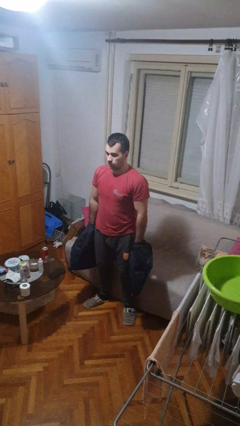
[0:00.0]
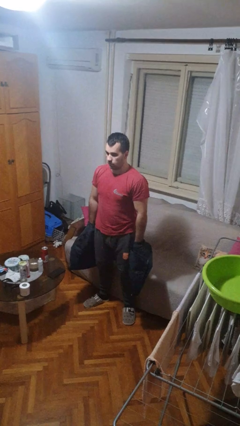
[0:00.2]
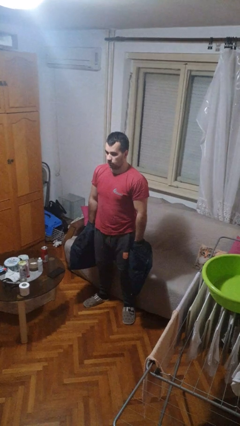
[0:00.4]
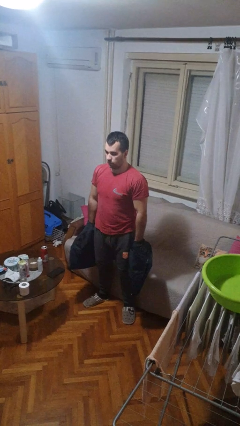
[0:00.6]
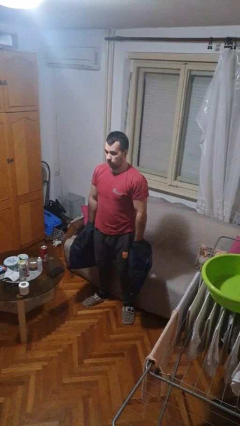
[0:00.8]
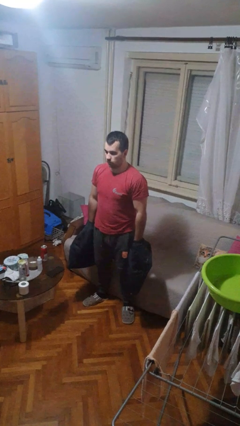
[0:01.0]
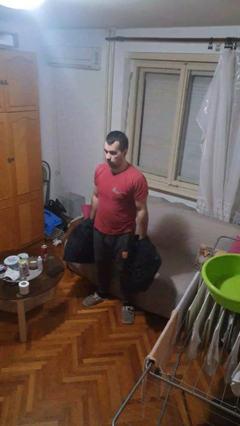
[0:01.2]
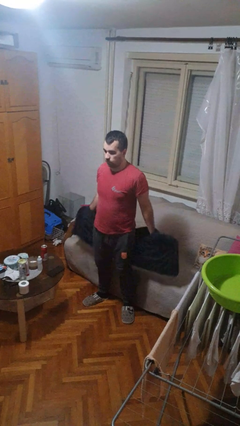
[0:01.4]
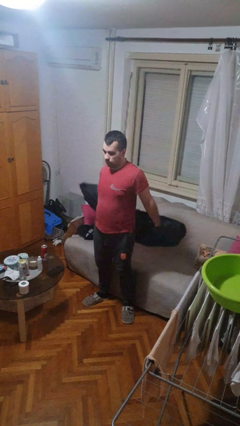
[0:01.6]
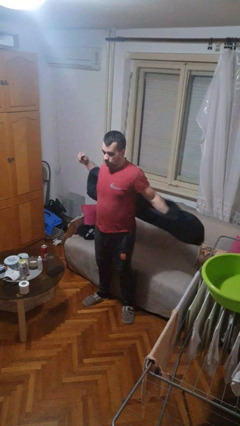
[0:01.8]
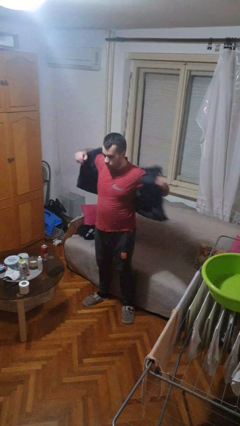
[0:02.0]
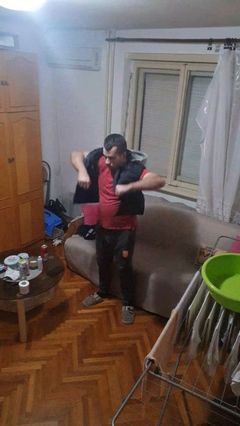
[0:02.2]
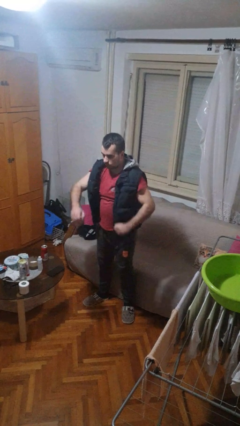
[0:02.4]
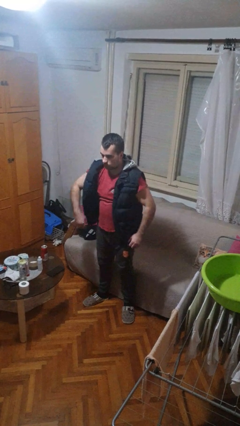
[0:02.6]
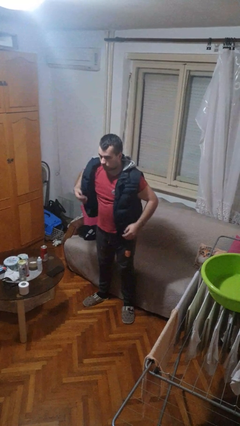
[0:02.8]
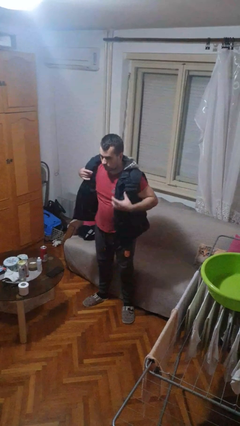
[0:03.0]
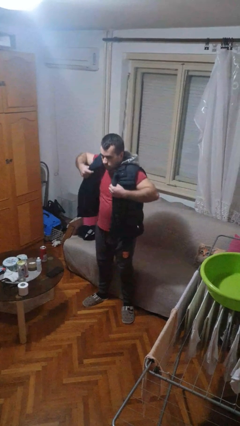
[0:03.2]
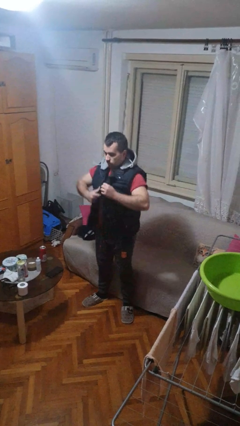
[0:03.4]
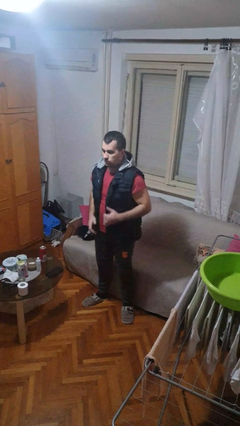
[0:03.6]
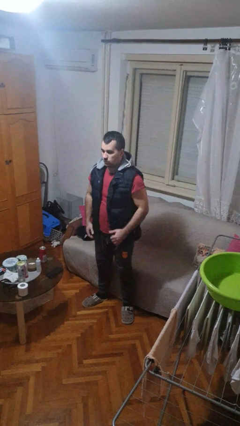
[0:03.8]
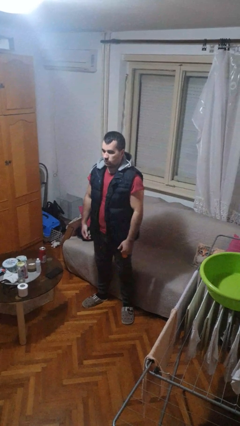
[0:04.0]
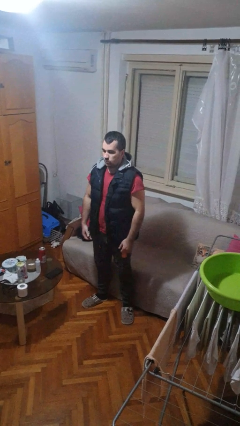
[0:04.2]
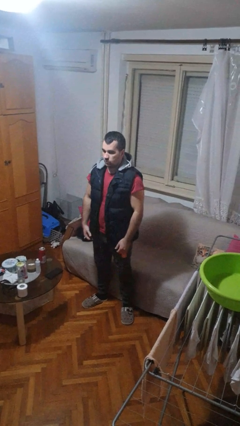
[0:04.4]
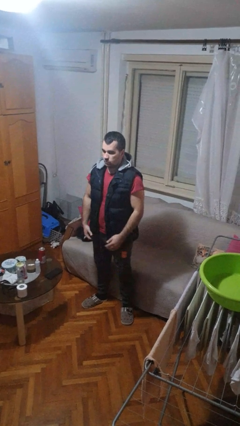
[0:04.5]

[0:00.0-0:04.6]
person puts on jacket

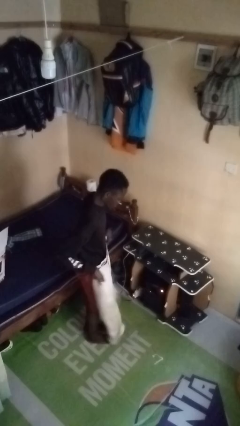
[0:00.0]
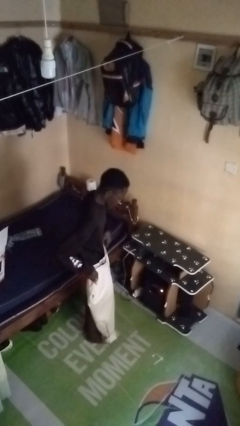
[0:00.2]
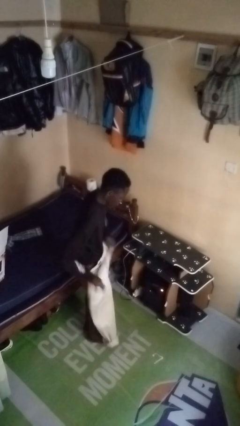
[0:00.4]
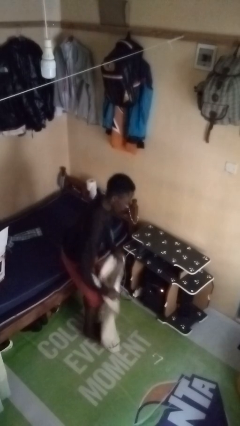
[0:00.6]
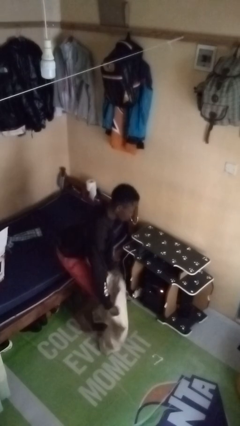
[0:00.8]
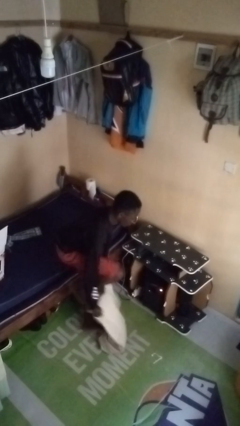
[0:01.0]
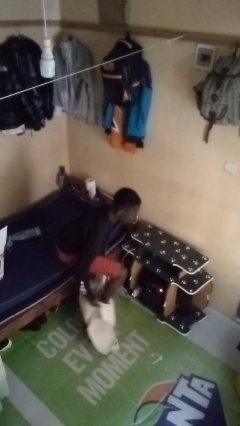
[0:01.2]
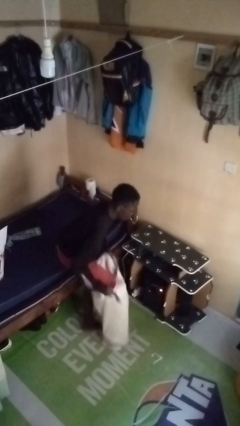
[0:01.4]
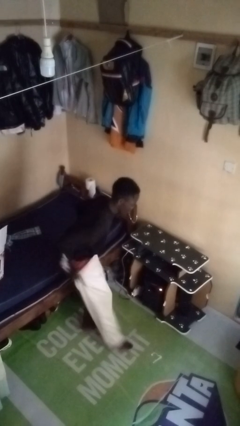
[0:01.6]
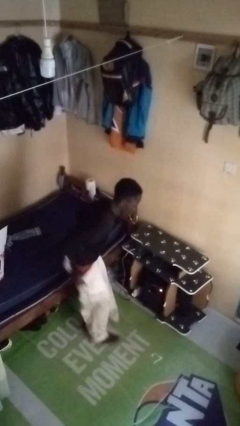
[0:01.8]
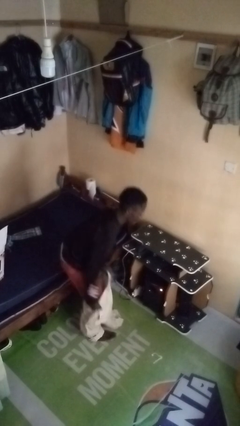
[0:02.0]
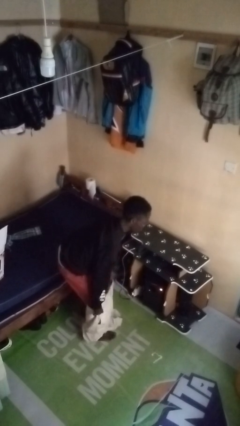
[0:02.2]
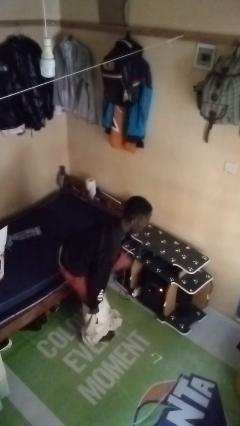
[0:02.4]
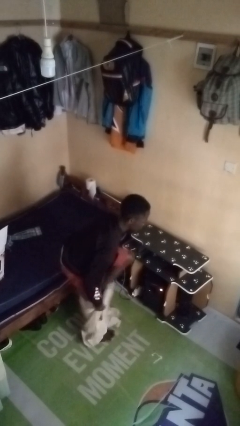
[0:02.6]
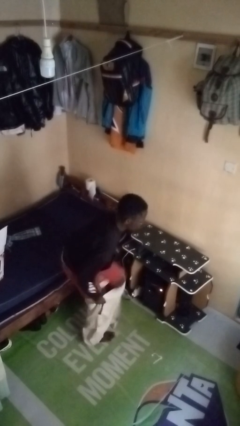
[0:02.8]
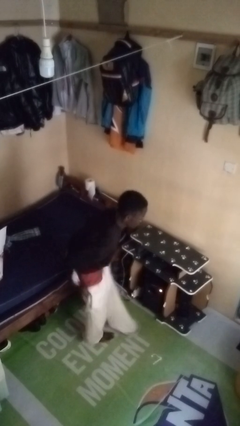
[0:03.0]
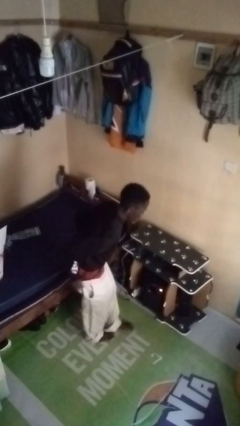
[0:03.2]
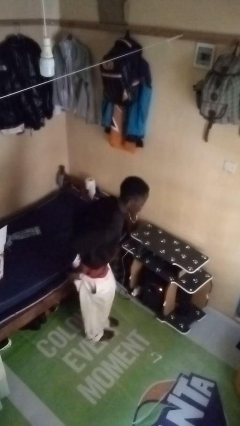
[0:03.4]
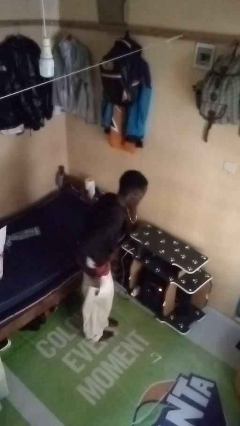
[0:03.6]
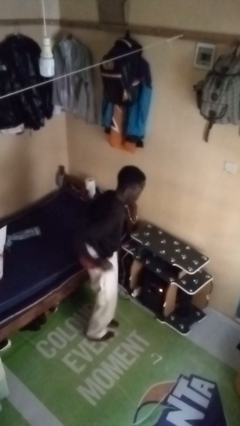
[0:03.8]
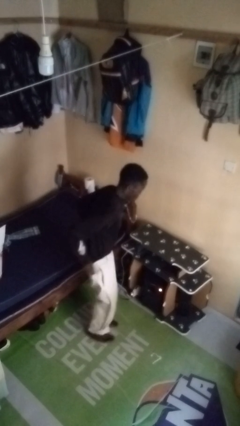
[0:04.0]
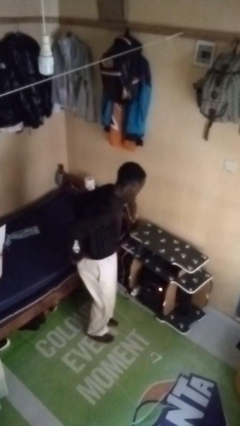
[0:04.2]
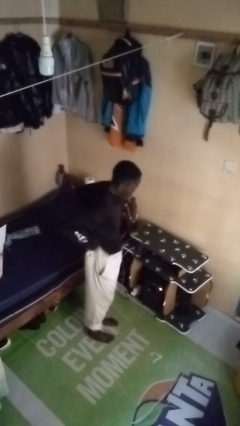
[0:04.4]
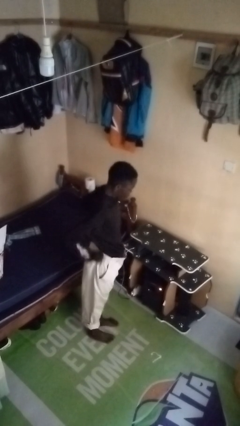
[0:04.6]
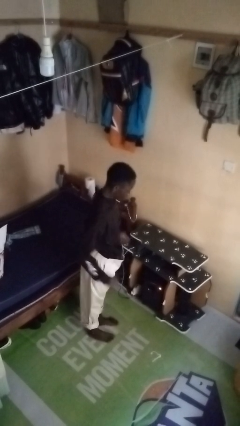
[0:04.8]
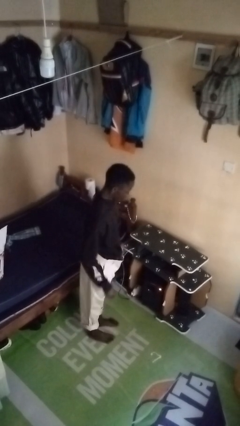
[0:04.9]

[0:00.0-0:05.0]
person puts on pants

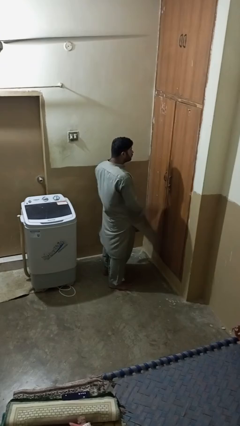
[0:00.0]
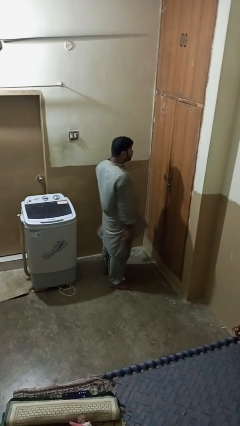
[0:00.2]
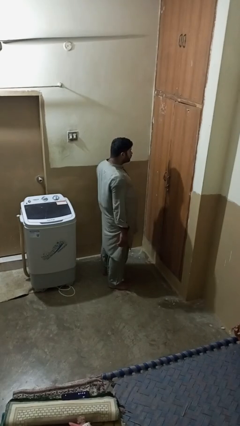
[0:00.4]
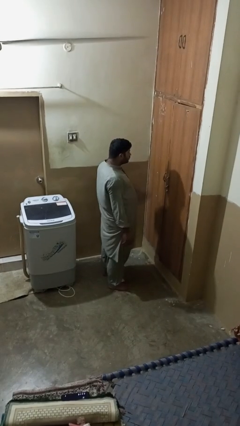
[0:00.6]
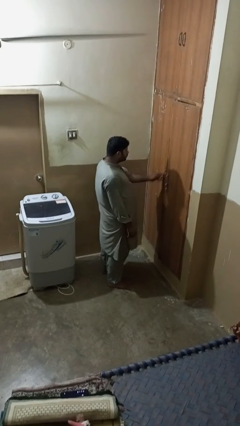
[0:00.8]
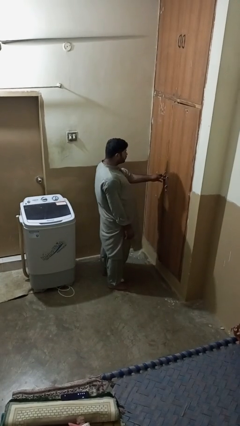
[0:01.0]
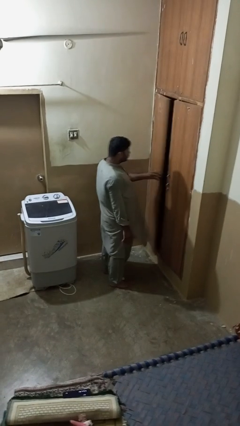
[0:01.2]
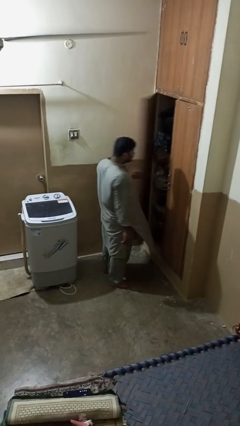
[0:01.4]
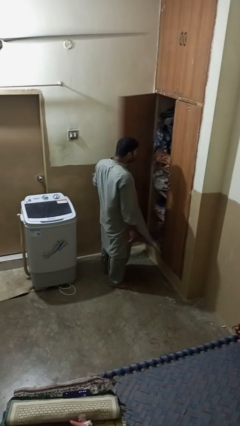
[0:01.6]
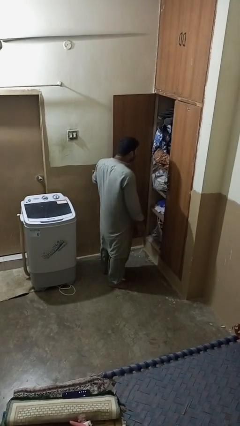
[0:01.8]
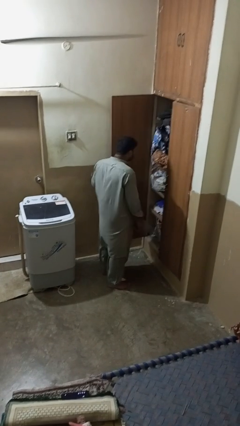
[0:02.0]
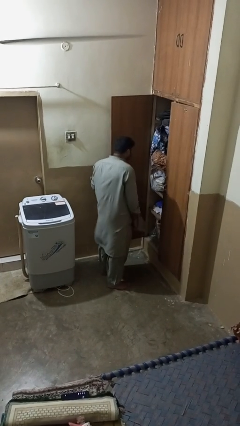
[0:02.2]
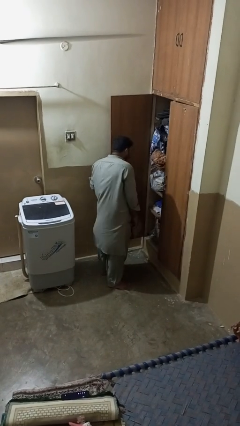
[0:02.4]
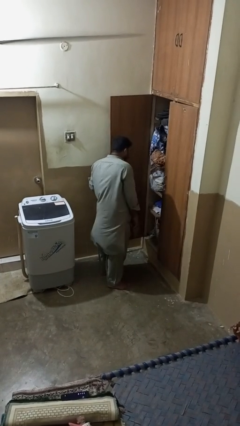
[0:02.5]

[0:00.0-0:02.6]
person opens closet door

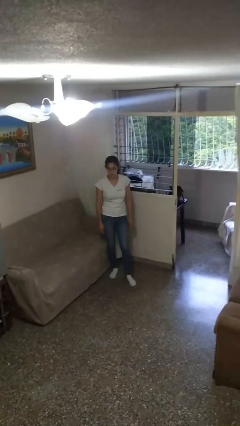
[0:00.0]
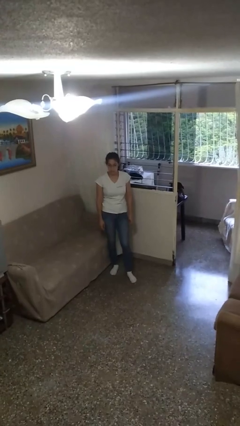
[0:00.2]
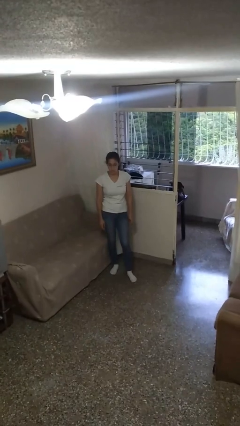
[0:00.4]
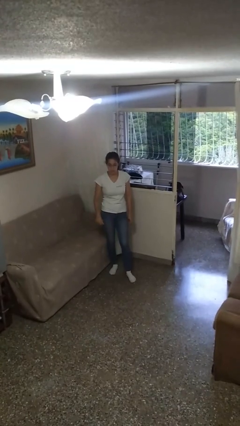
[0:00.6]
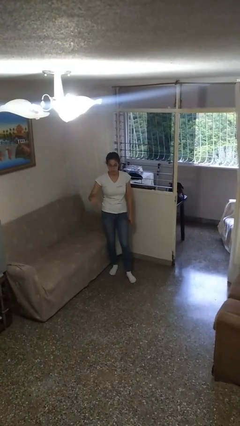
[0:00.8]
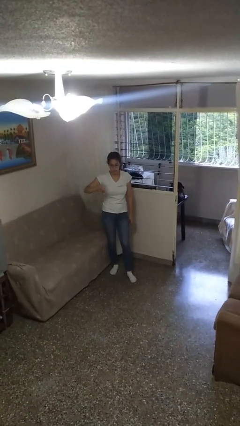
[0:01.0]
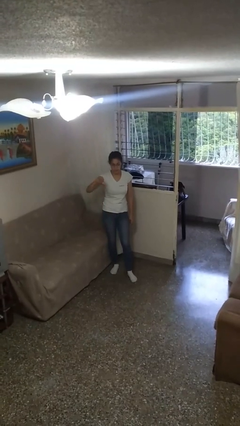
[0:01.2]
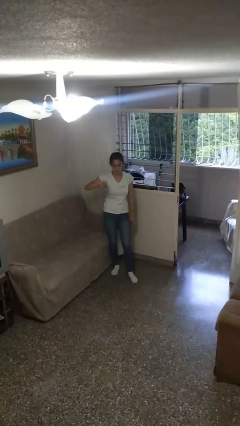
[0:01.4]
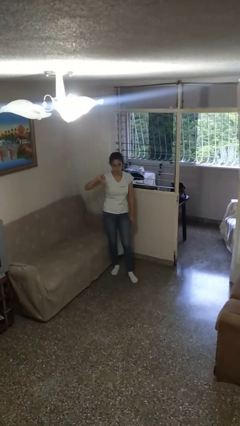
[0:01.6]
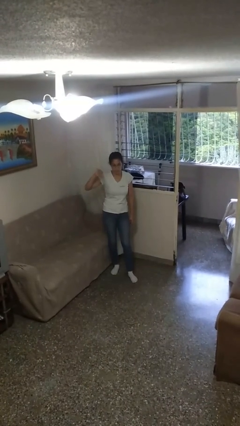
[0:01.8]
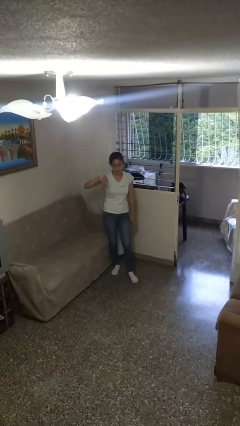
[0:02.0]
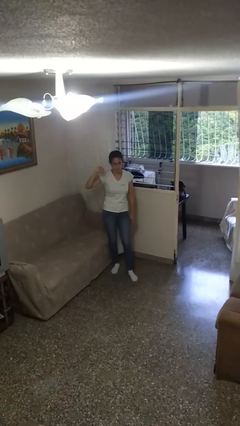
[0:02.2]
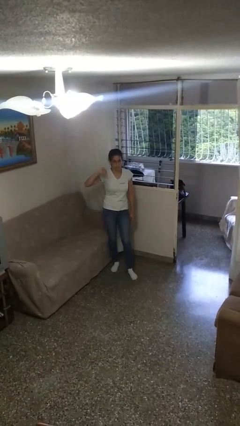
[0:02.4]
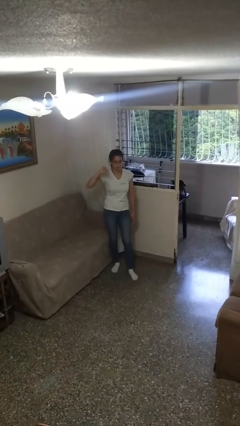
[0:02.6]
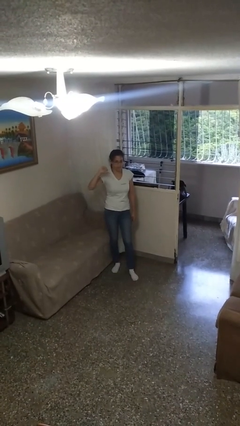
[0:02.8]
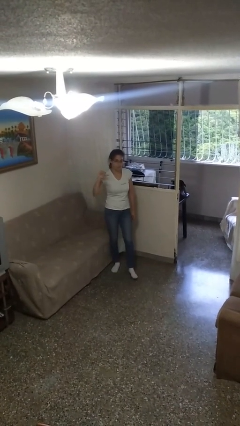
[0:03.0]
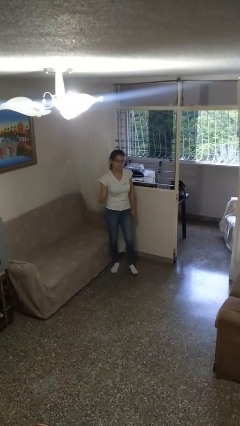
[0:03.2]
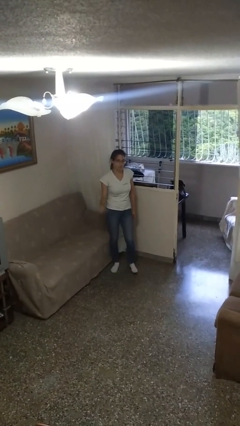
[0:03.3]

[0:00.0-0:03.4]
person gestures thumbs down

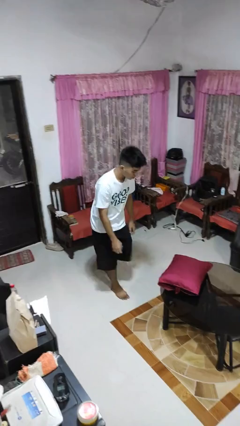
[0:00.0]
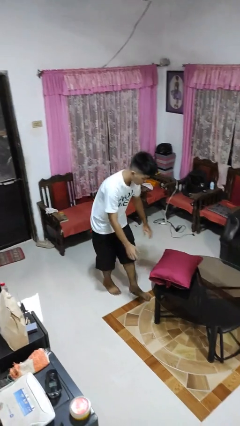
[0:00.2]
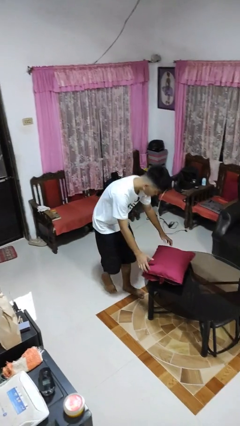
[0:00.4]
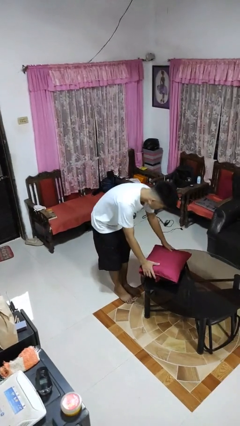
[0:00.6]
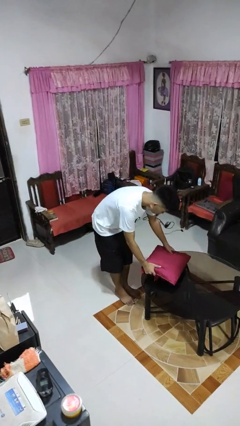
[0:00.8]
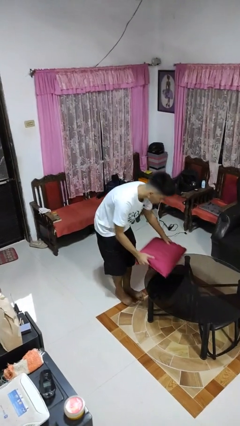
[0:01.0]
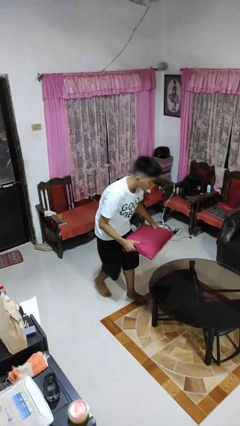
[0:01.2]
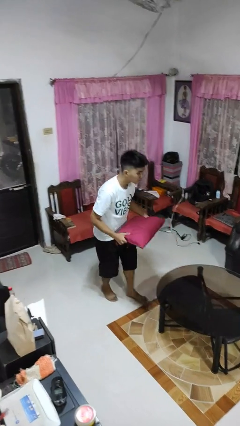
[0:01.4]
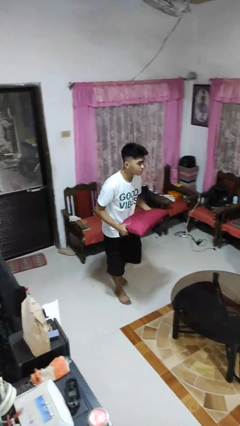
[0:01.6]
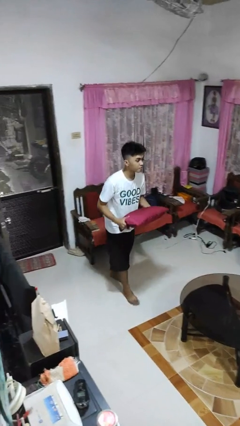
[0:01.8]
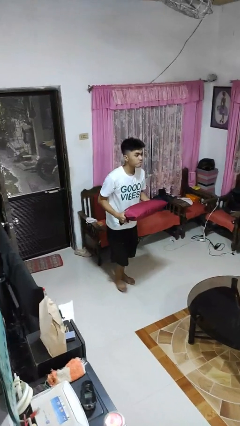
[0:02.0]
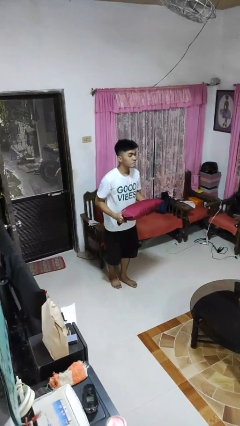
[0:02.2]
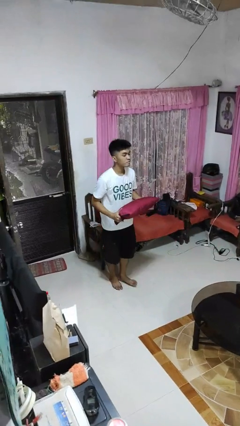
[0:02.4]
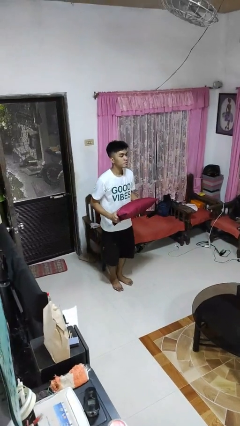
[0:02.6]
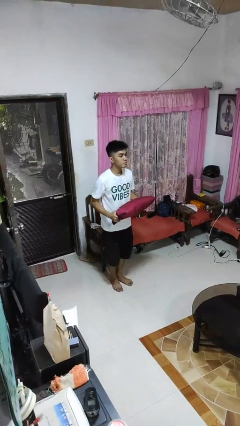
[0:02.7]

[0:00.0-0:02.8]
person picks up object from table
